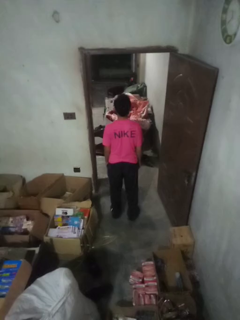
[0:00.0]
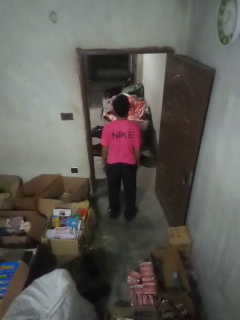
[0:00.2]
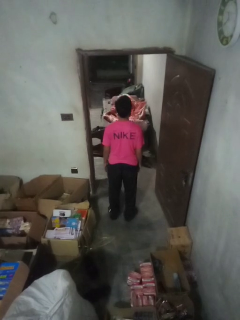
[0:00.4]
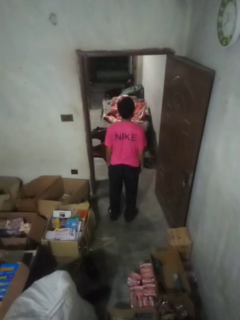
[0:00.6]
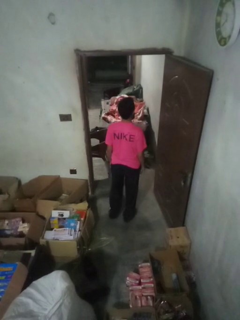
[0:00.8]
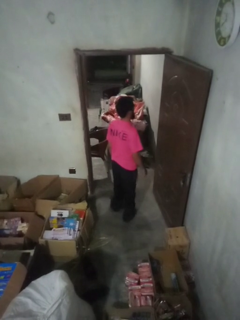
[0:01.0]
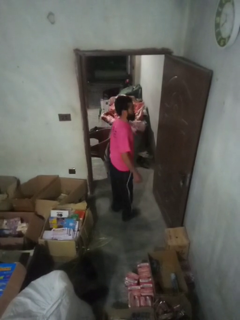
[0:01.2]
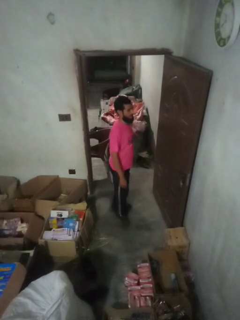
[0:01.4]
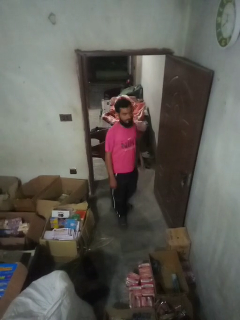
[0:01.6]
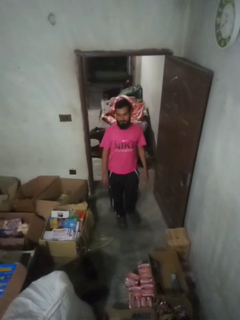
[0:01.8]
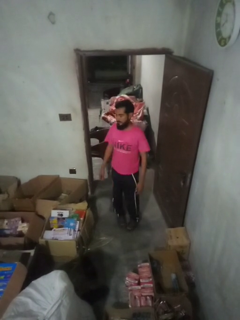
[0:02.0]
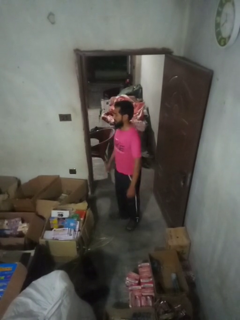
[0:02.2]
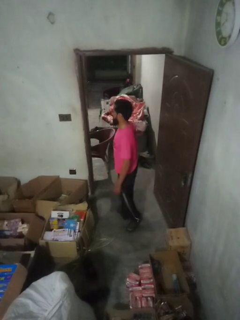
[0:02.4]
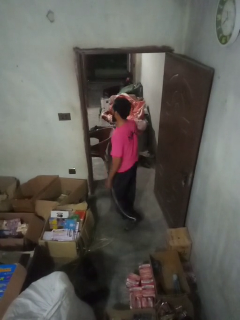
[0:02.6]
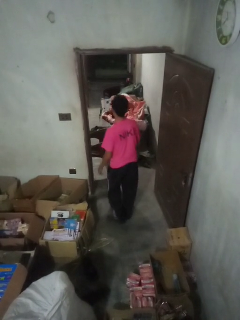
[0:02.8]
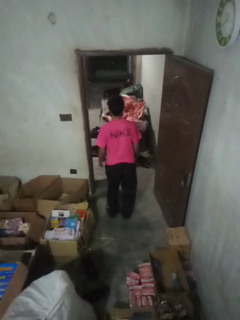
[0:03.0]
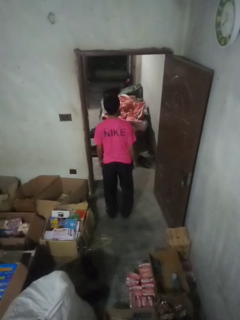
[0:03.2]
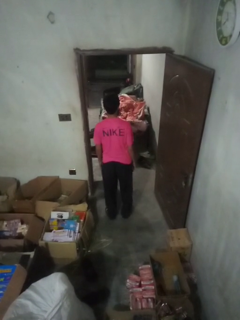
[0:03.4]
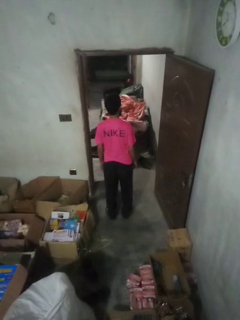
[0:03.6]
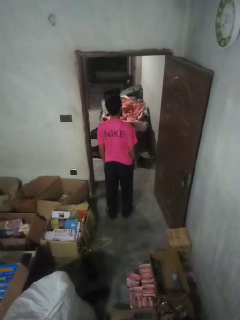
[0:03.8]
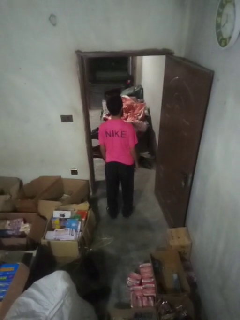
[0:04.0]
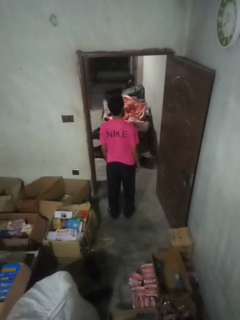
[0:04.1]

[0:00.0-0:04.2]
person twirls

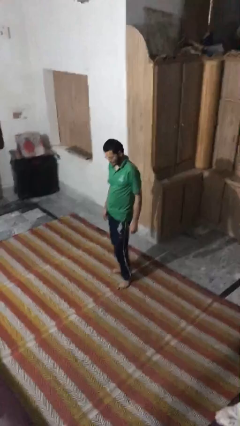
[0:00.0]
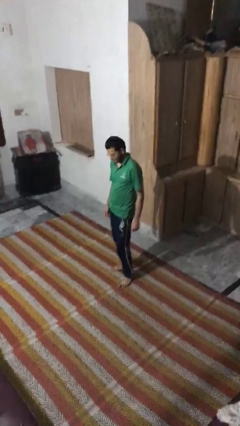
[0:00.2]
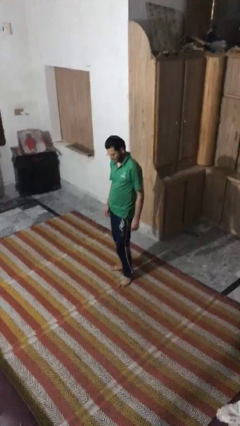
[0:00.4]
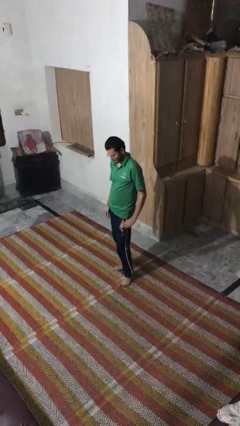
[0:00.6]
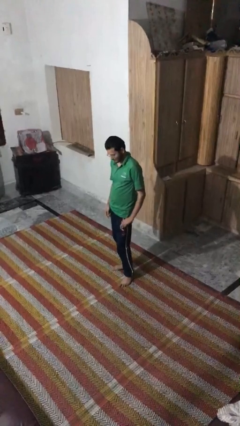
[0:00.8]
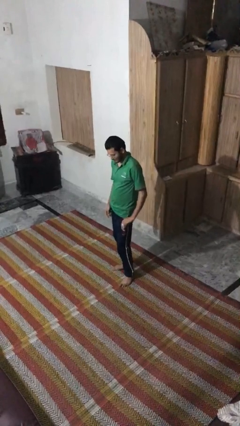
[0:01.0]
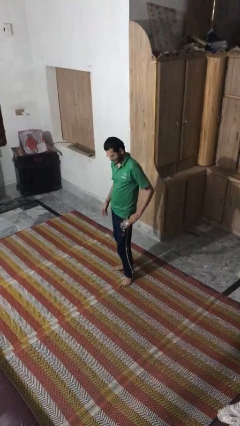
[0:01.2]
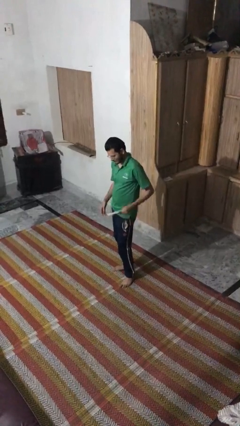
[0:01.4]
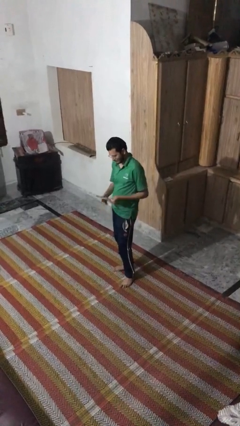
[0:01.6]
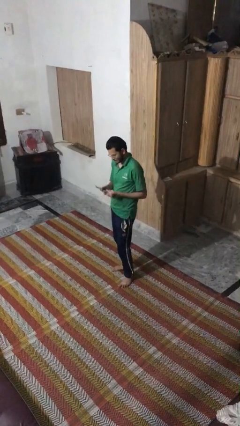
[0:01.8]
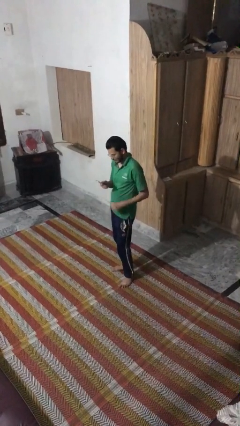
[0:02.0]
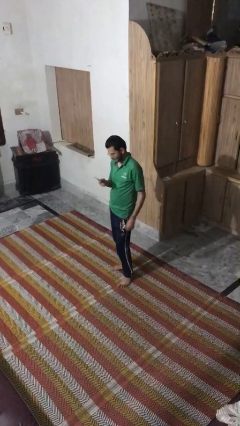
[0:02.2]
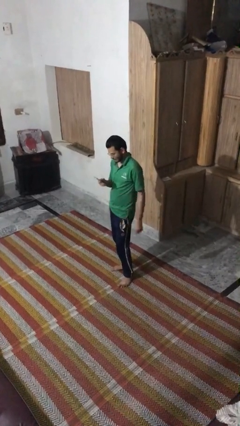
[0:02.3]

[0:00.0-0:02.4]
person takes phone from pocket

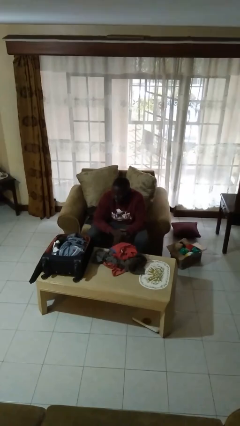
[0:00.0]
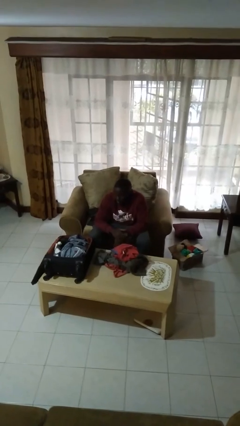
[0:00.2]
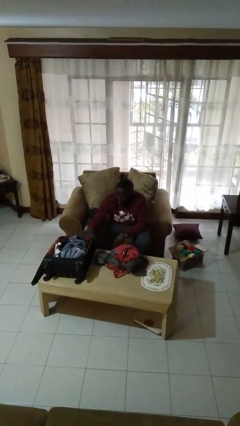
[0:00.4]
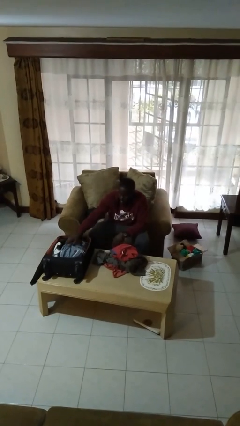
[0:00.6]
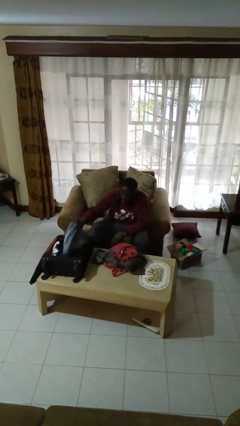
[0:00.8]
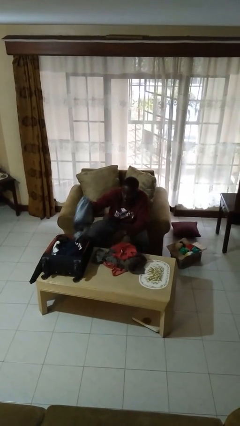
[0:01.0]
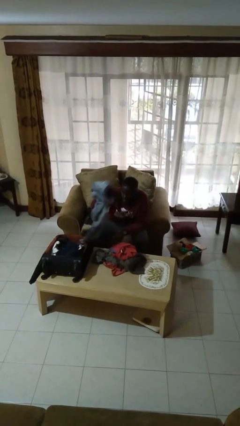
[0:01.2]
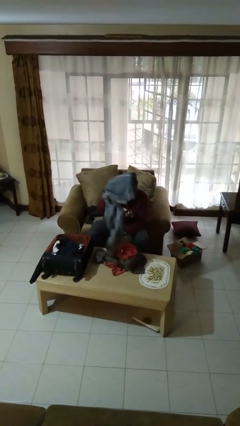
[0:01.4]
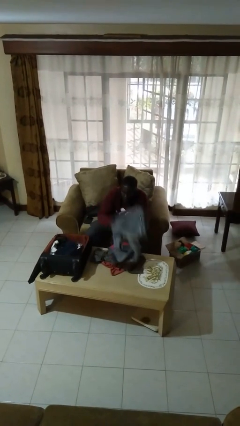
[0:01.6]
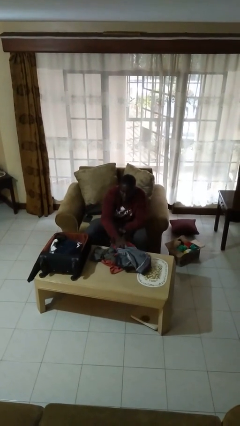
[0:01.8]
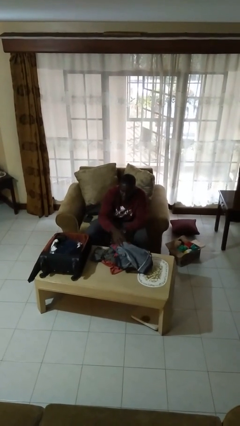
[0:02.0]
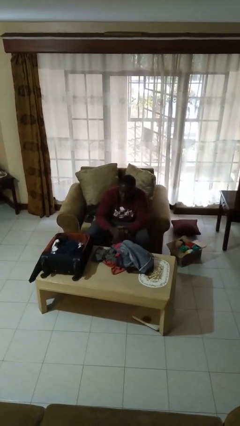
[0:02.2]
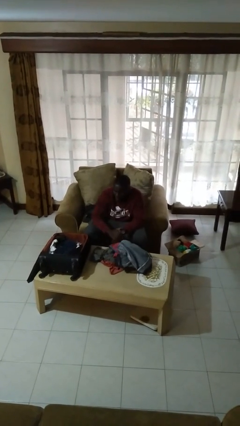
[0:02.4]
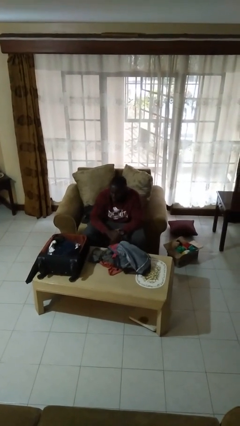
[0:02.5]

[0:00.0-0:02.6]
person unloads clothes from suitcase

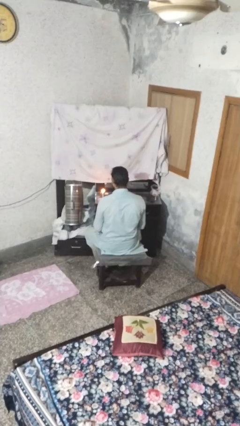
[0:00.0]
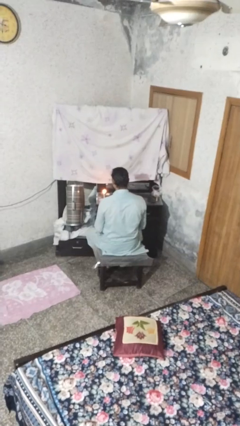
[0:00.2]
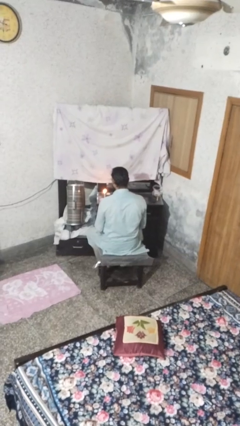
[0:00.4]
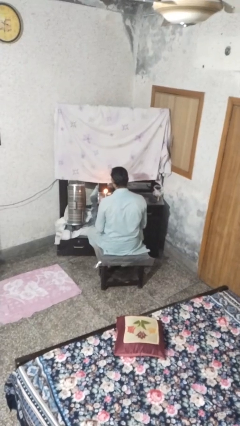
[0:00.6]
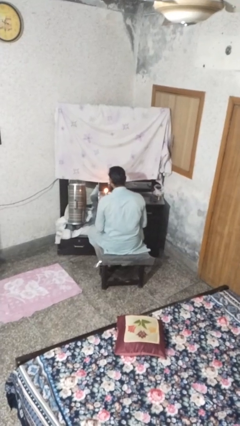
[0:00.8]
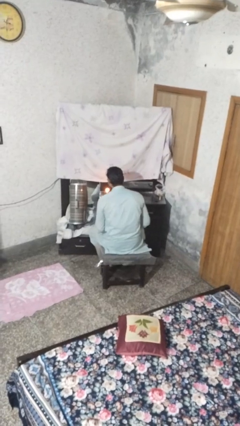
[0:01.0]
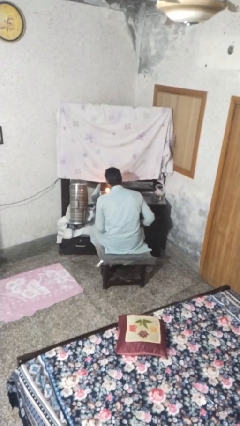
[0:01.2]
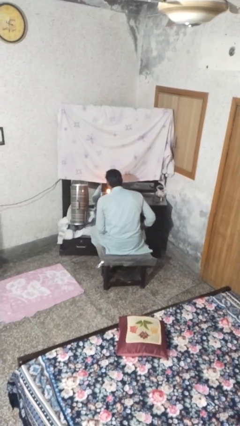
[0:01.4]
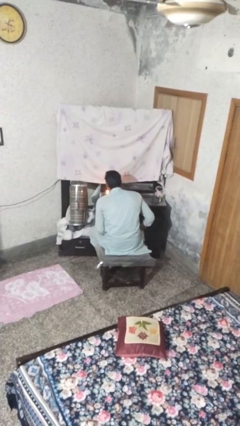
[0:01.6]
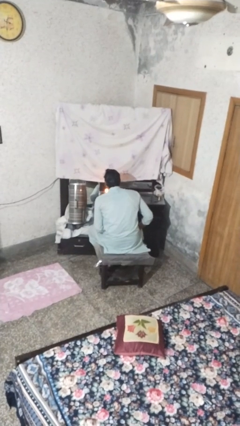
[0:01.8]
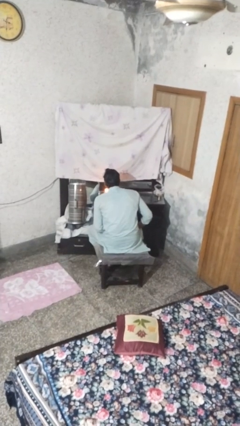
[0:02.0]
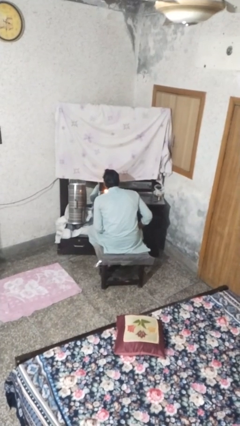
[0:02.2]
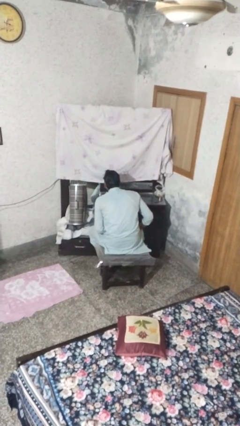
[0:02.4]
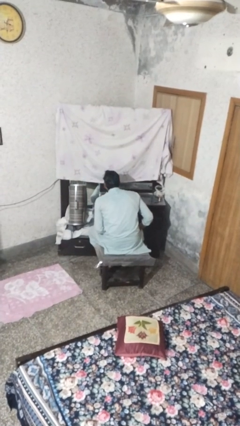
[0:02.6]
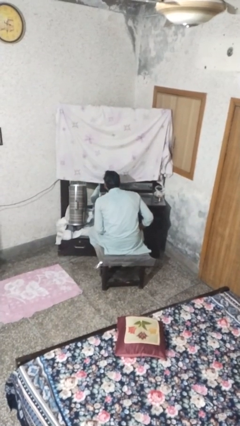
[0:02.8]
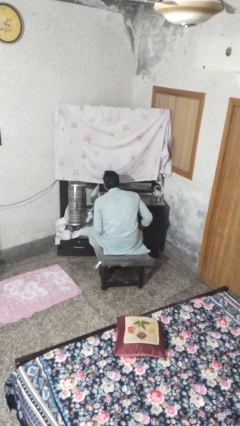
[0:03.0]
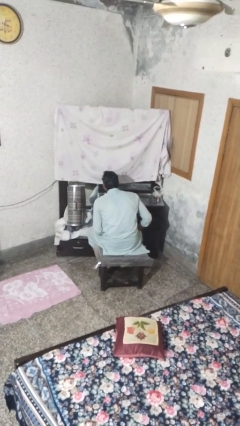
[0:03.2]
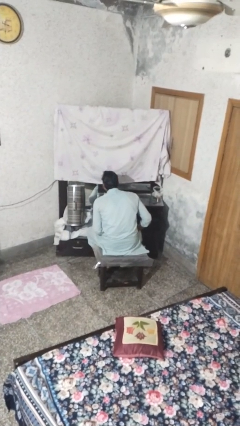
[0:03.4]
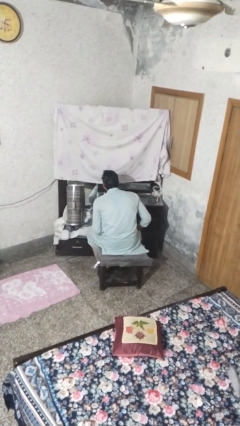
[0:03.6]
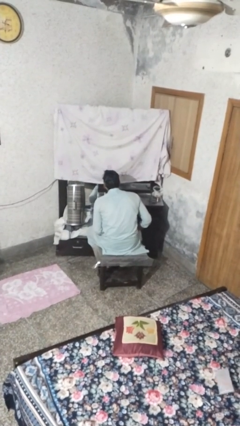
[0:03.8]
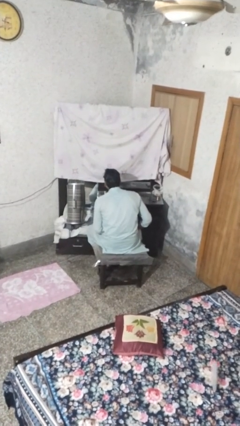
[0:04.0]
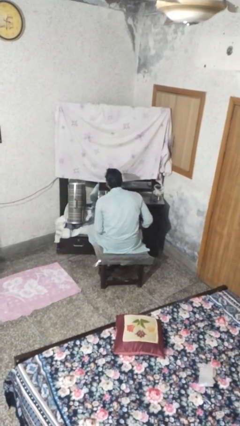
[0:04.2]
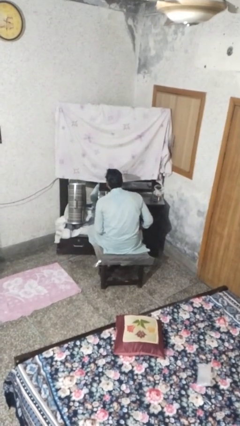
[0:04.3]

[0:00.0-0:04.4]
person extinguishes candle

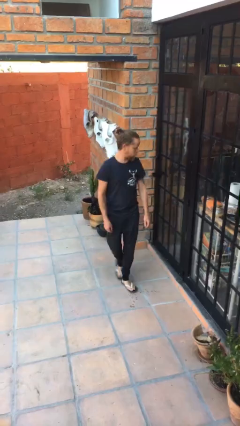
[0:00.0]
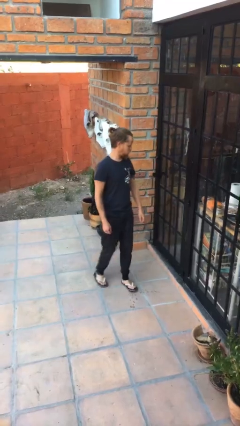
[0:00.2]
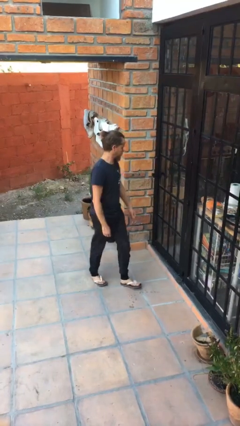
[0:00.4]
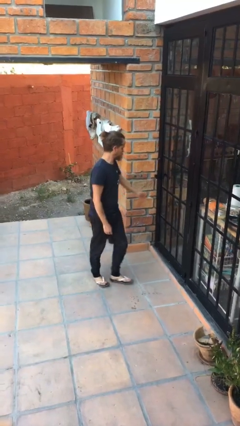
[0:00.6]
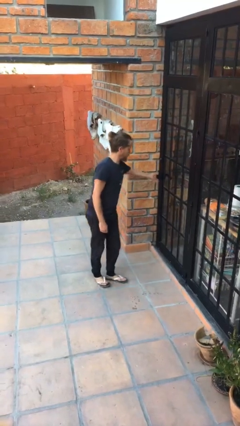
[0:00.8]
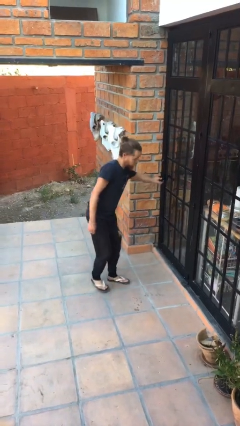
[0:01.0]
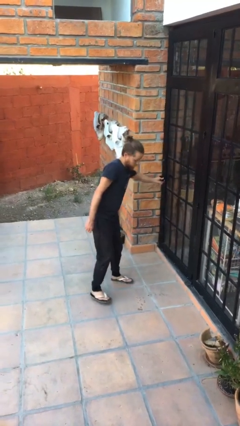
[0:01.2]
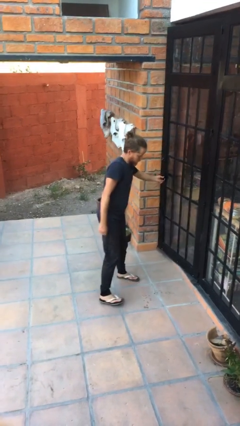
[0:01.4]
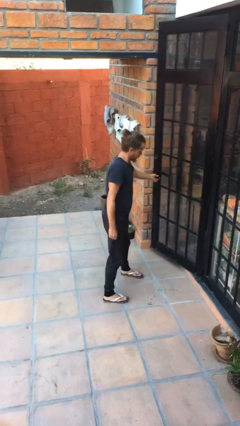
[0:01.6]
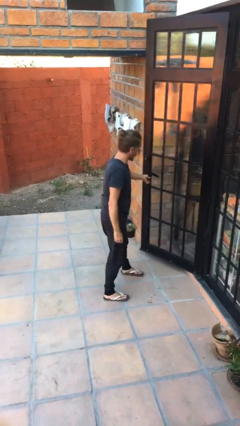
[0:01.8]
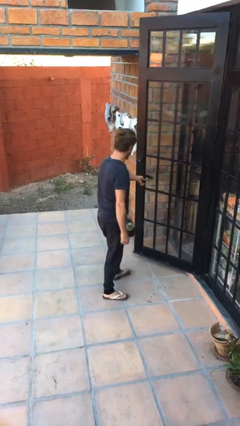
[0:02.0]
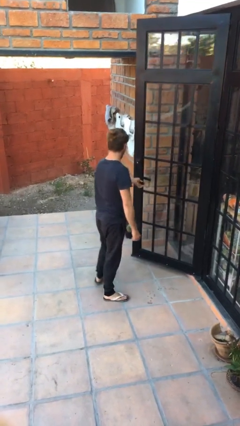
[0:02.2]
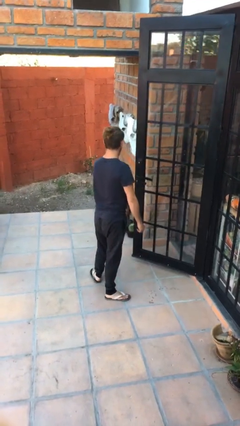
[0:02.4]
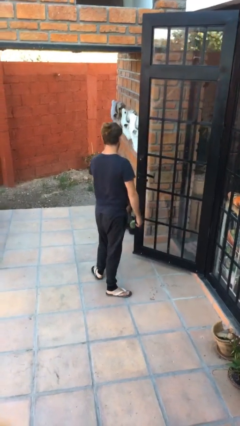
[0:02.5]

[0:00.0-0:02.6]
person opens facility door

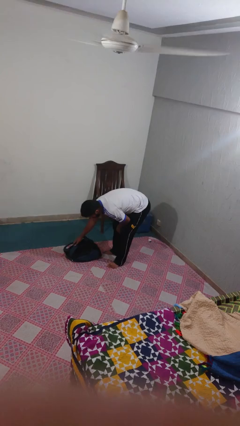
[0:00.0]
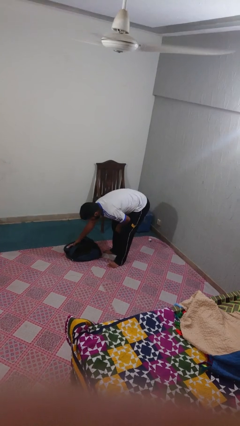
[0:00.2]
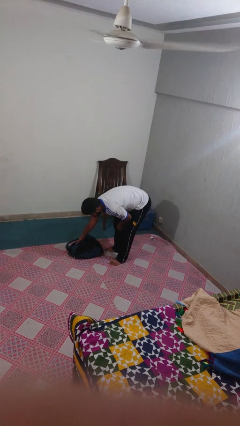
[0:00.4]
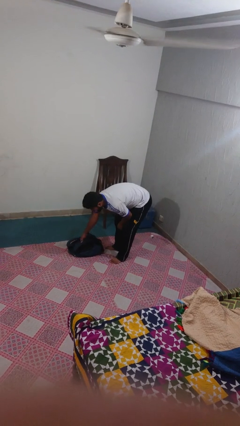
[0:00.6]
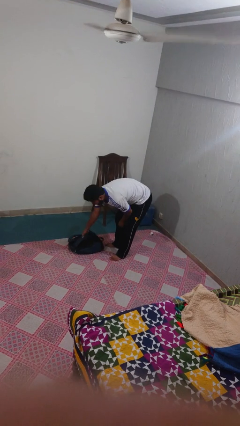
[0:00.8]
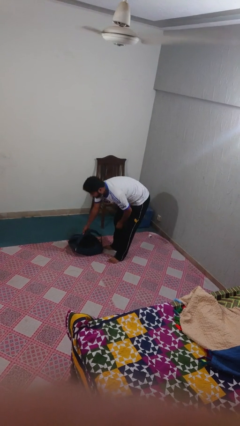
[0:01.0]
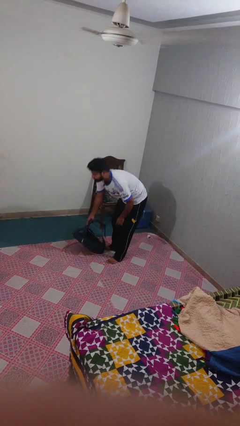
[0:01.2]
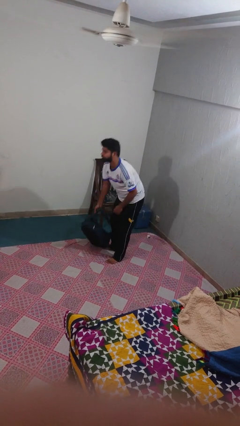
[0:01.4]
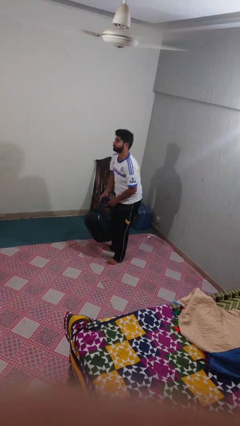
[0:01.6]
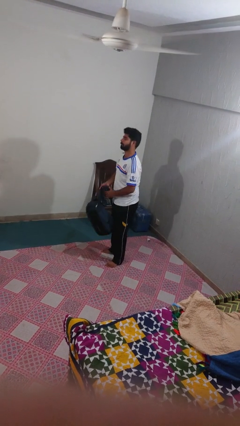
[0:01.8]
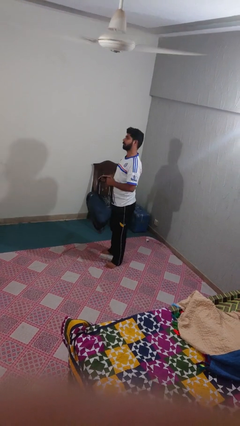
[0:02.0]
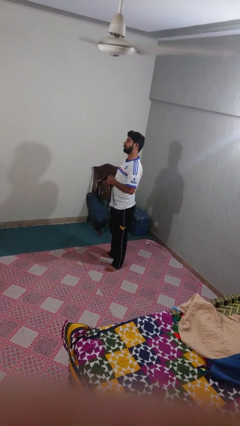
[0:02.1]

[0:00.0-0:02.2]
person picks up object from floor
